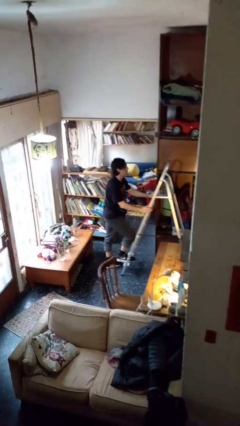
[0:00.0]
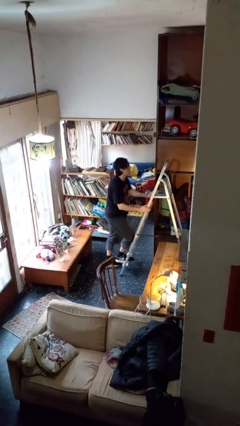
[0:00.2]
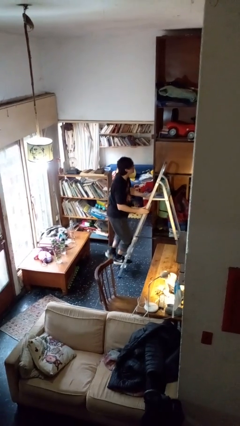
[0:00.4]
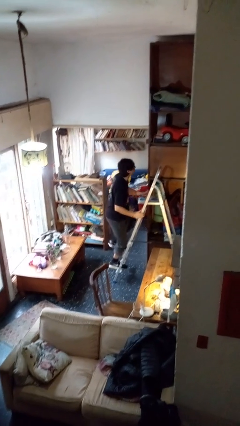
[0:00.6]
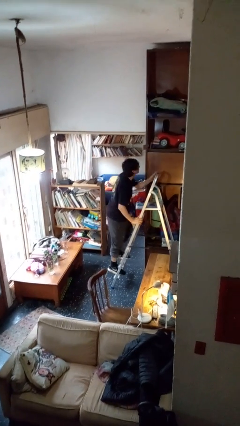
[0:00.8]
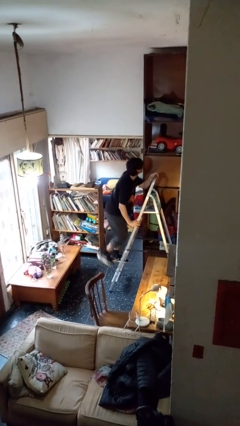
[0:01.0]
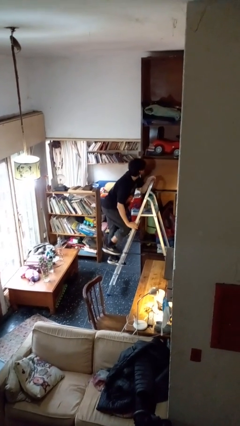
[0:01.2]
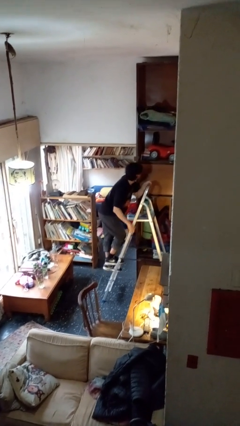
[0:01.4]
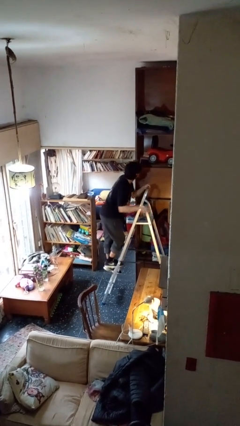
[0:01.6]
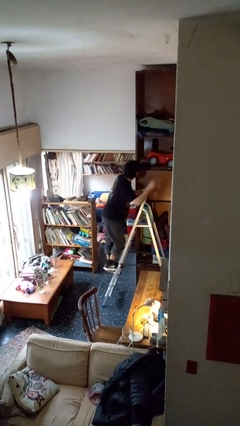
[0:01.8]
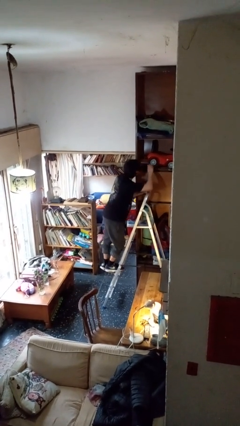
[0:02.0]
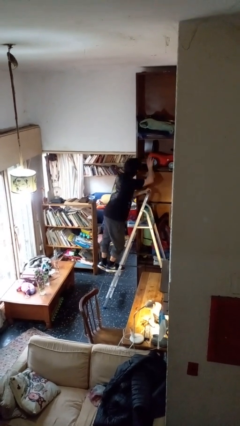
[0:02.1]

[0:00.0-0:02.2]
person climbs up ladder

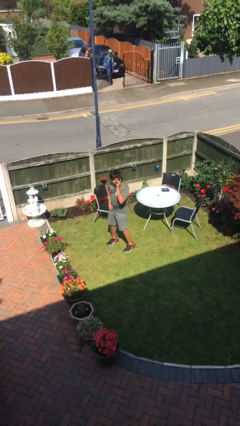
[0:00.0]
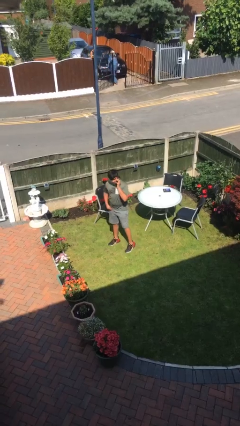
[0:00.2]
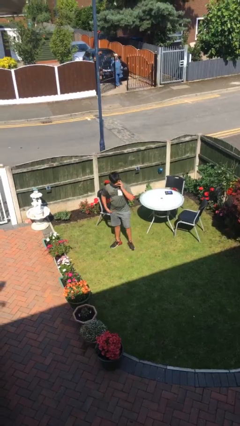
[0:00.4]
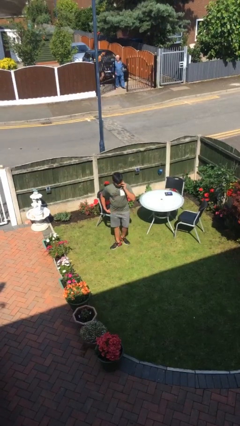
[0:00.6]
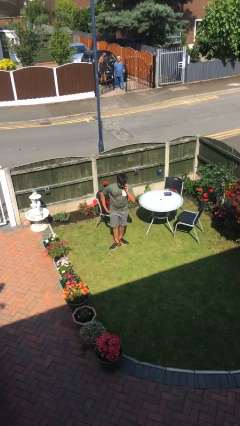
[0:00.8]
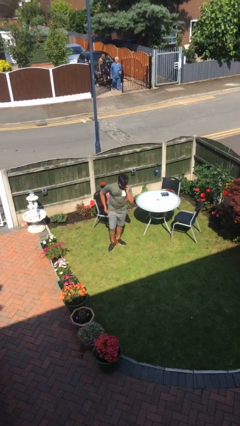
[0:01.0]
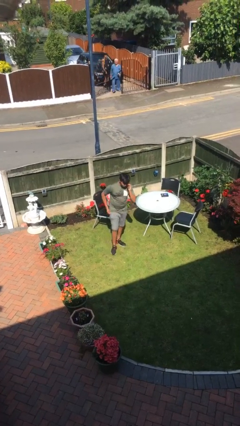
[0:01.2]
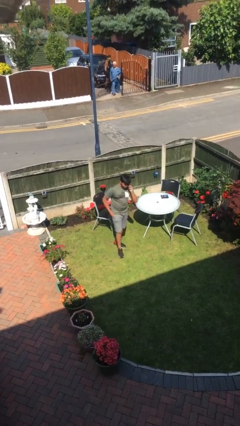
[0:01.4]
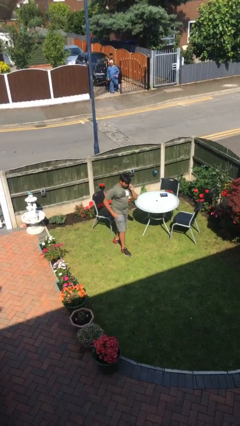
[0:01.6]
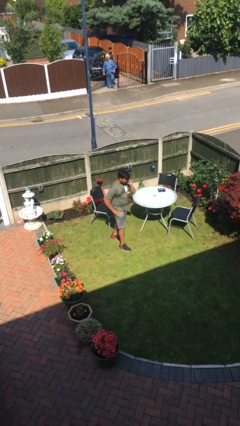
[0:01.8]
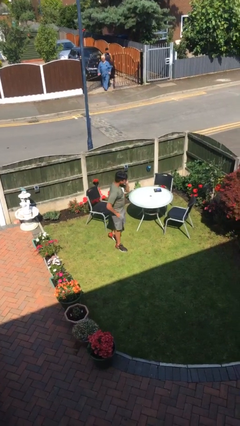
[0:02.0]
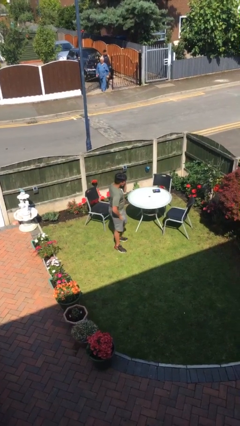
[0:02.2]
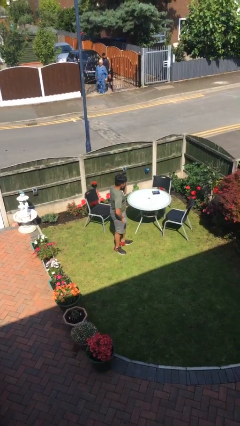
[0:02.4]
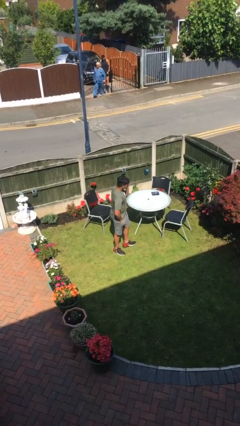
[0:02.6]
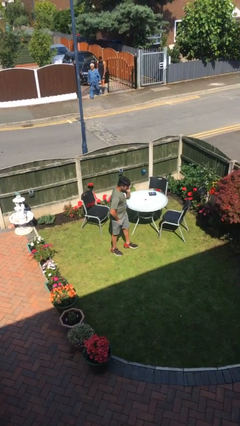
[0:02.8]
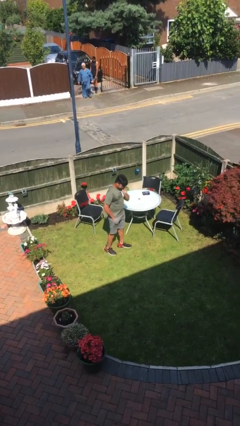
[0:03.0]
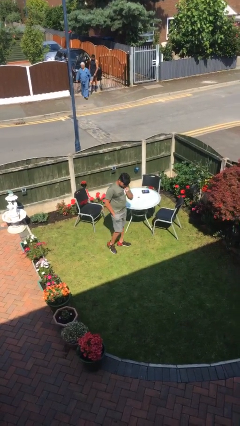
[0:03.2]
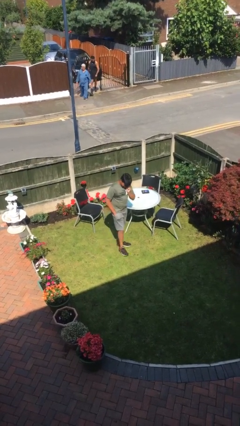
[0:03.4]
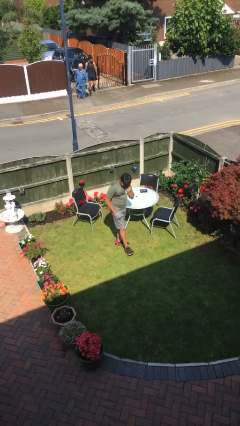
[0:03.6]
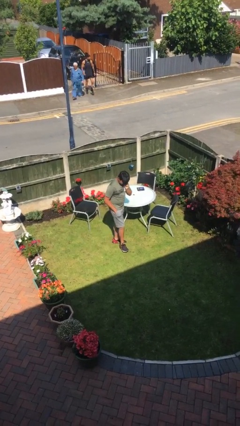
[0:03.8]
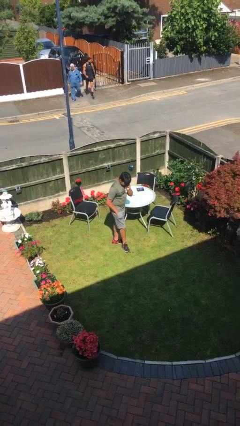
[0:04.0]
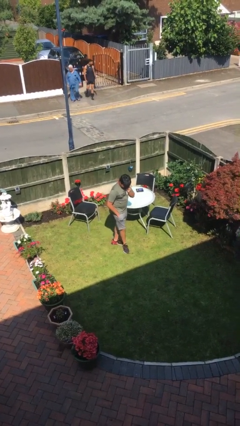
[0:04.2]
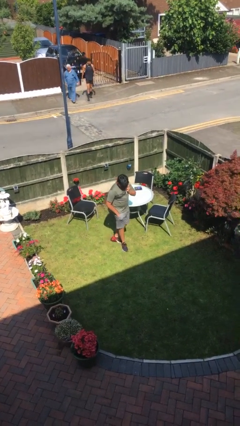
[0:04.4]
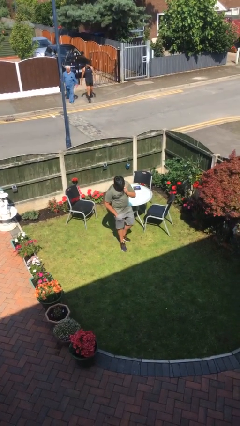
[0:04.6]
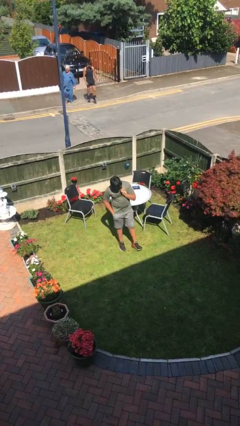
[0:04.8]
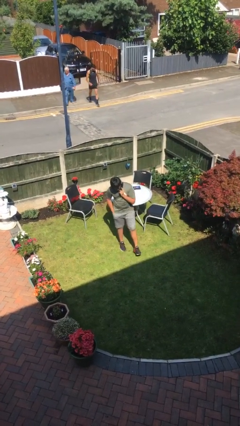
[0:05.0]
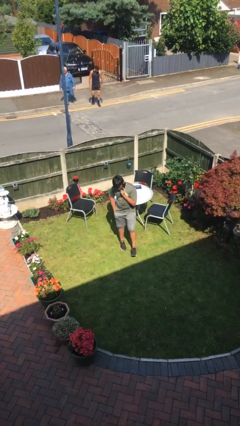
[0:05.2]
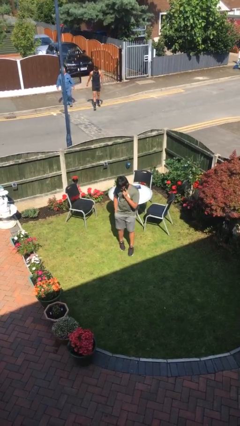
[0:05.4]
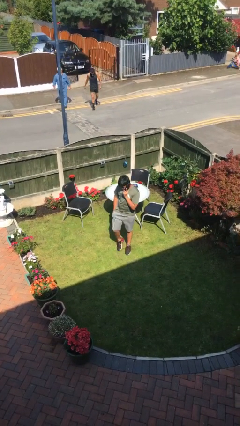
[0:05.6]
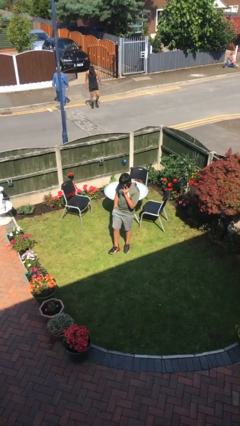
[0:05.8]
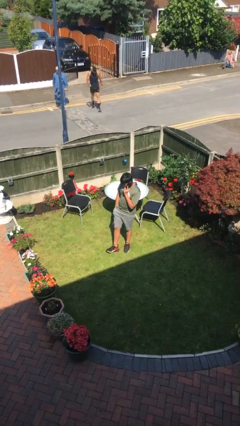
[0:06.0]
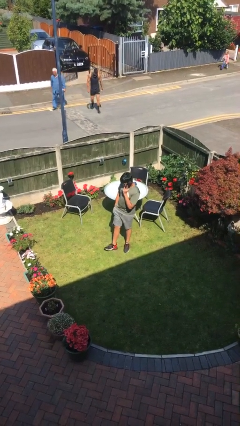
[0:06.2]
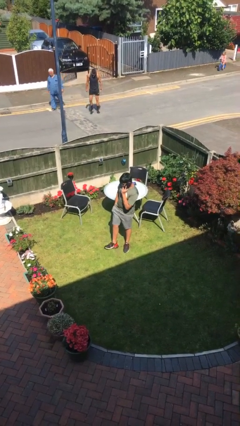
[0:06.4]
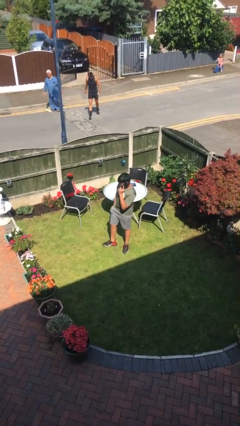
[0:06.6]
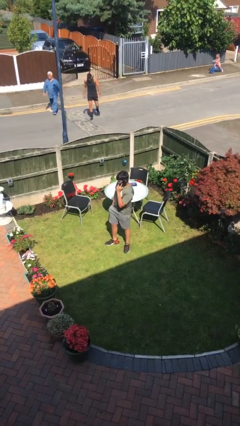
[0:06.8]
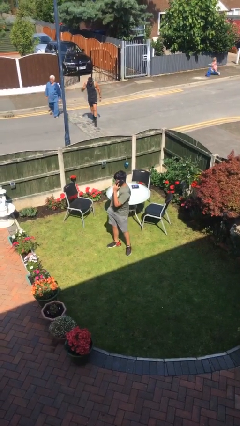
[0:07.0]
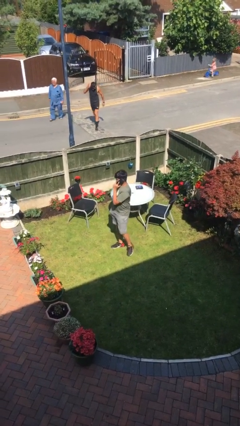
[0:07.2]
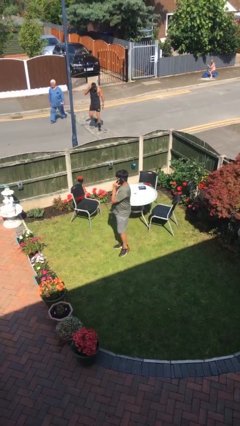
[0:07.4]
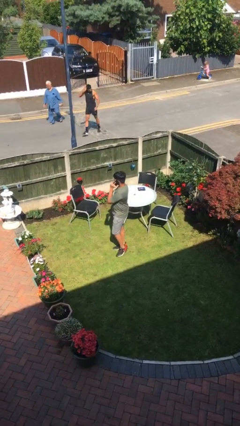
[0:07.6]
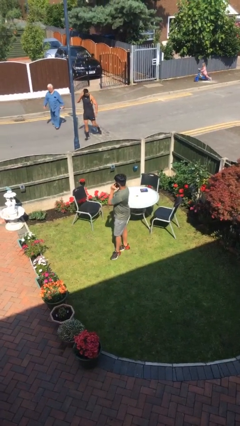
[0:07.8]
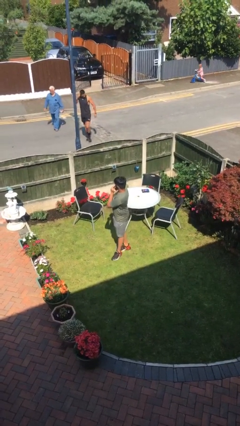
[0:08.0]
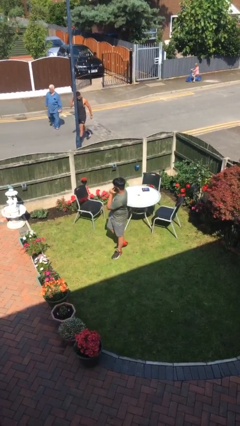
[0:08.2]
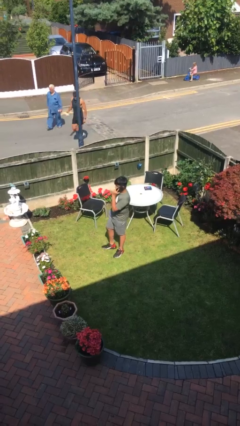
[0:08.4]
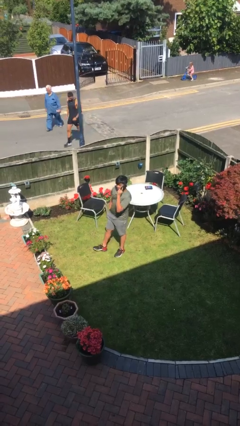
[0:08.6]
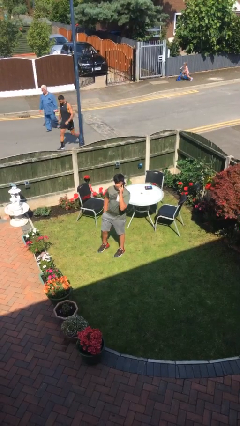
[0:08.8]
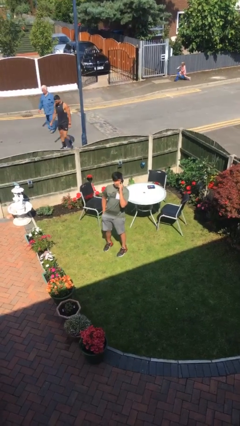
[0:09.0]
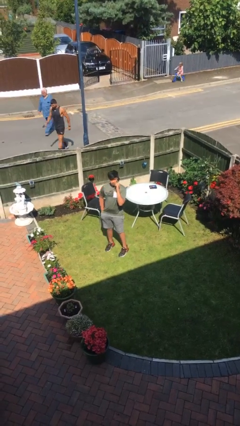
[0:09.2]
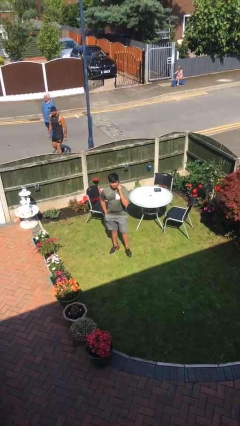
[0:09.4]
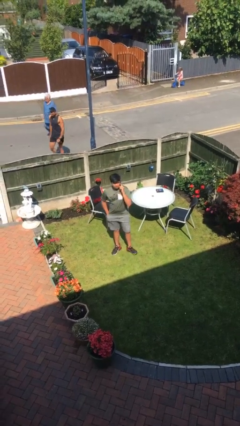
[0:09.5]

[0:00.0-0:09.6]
person talks on phone

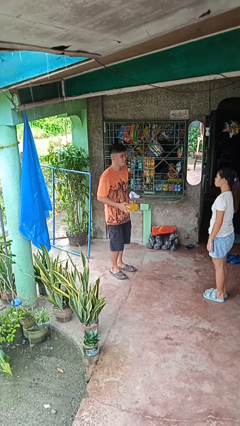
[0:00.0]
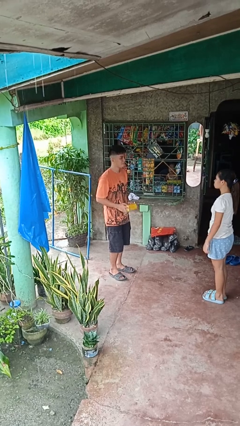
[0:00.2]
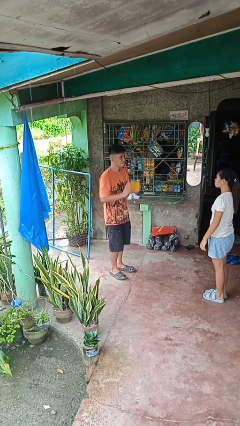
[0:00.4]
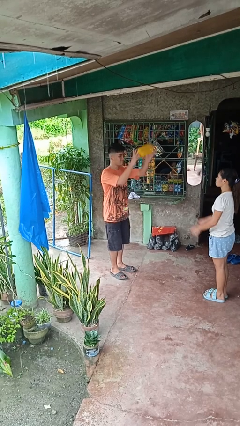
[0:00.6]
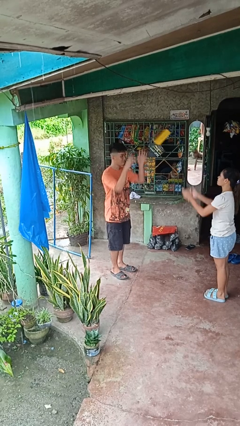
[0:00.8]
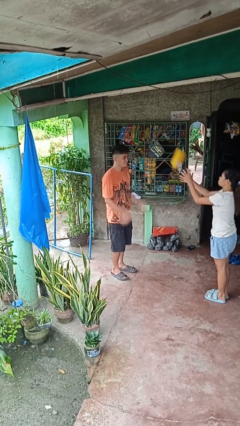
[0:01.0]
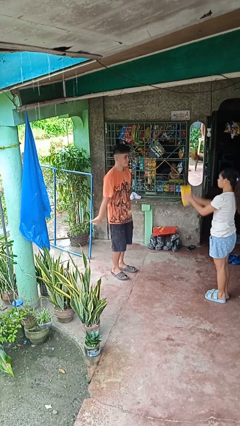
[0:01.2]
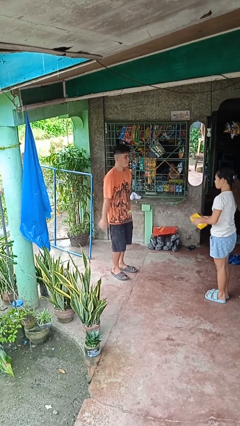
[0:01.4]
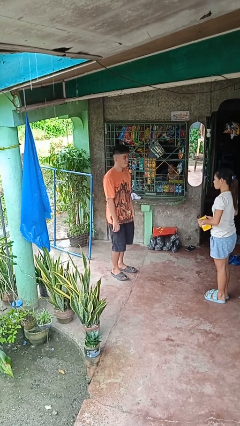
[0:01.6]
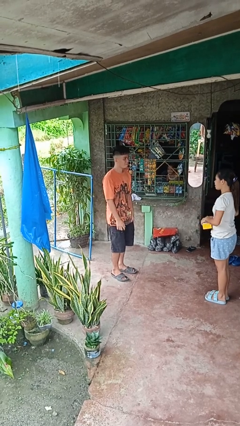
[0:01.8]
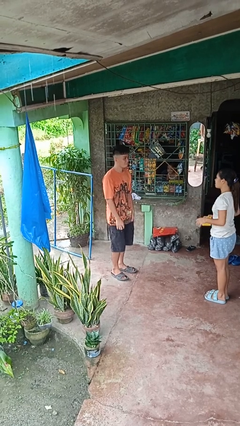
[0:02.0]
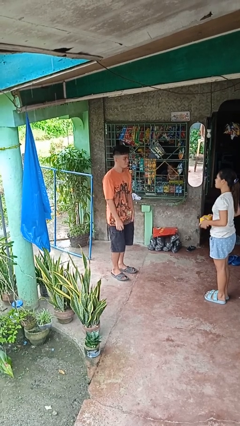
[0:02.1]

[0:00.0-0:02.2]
person throws object to person

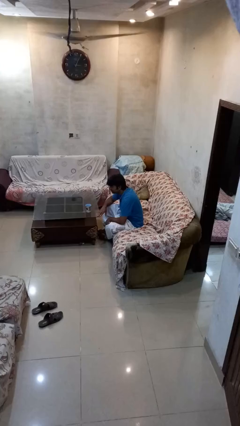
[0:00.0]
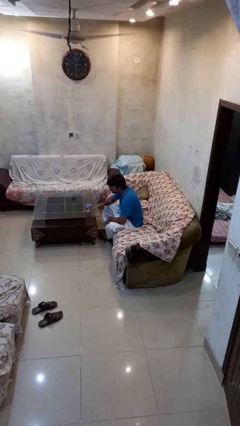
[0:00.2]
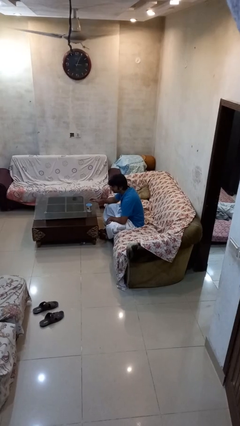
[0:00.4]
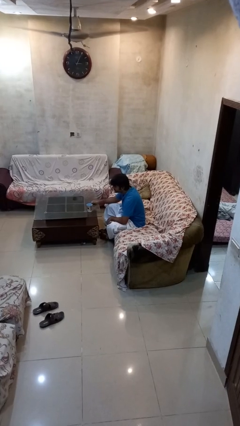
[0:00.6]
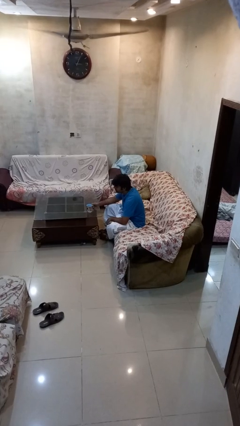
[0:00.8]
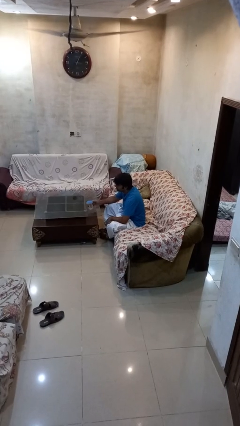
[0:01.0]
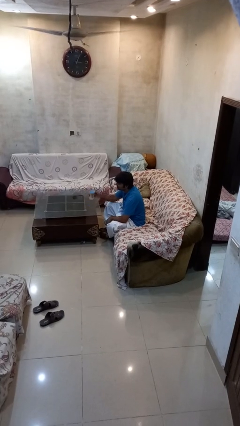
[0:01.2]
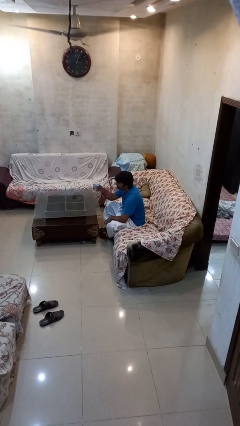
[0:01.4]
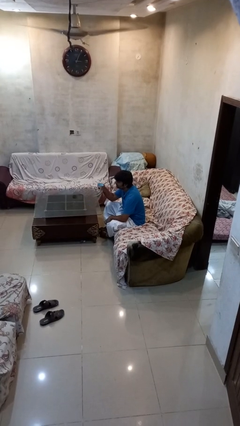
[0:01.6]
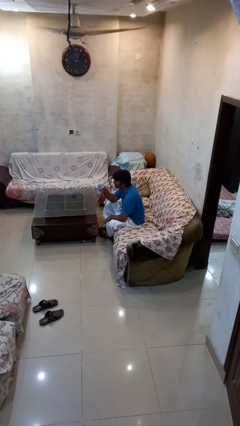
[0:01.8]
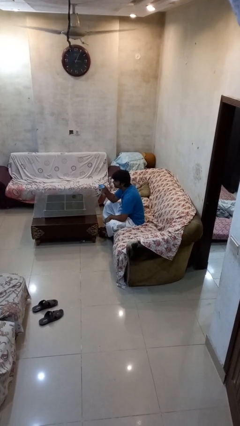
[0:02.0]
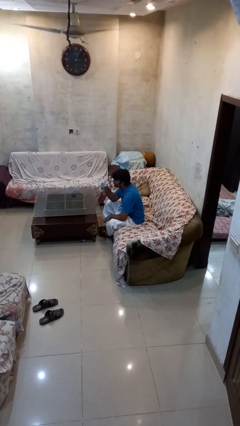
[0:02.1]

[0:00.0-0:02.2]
person picks up object from table

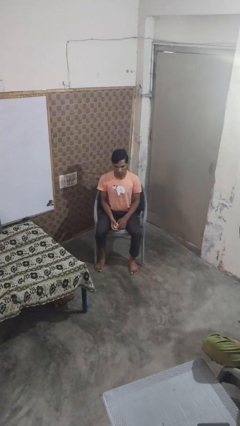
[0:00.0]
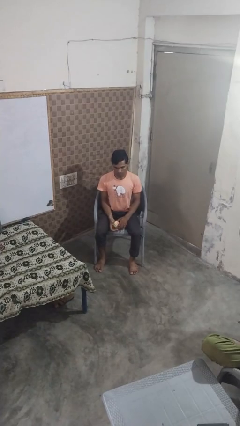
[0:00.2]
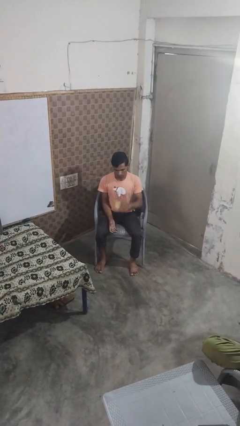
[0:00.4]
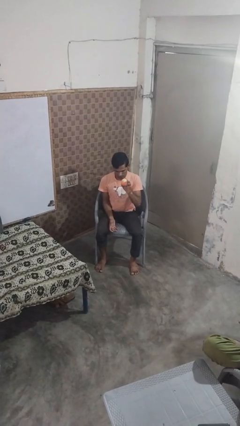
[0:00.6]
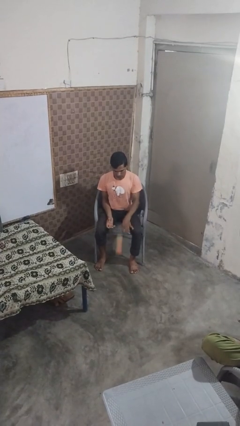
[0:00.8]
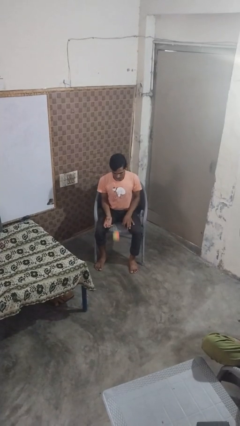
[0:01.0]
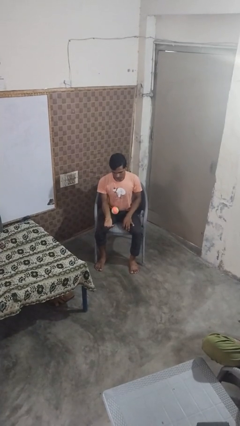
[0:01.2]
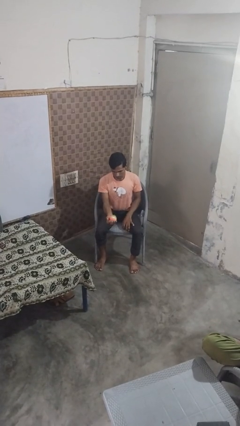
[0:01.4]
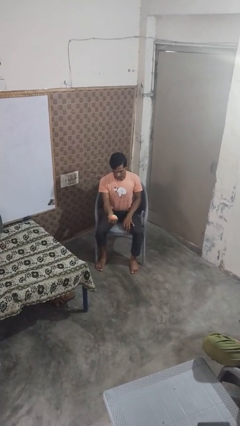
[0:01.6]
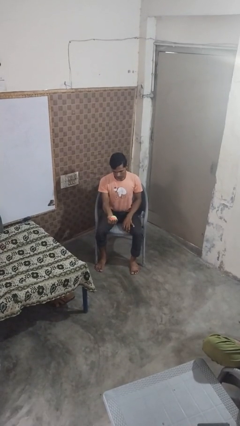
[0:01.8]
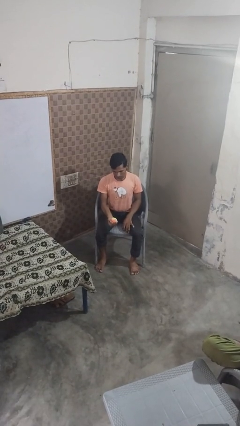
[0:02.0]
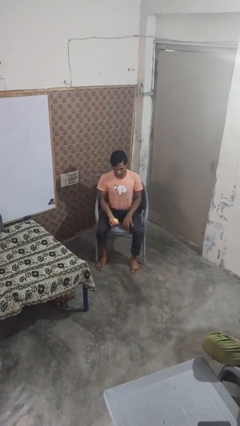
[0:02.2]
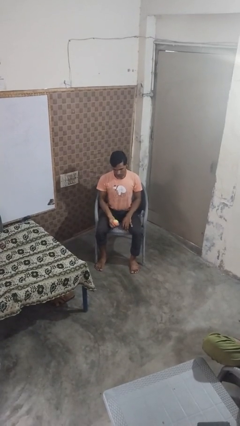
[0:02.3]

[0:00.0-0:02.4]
person bounces ball on floor
